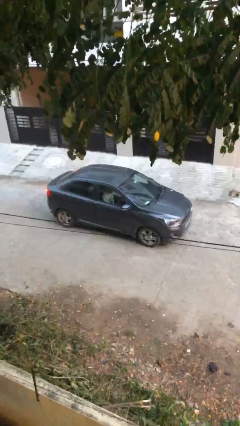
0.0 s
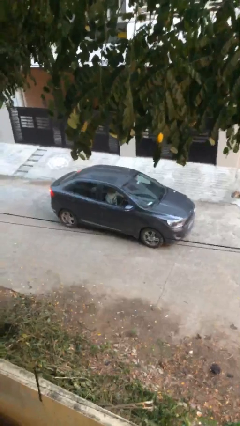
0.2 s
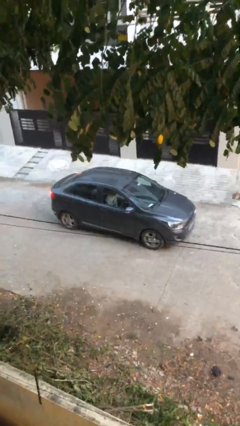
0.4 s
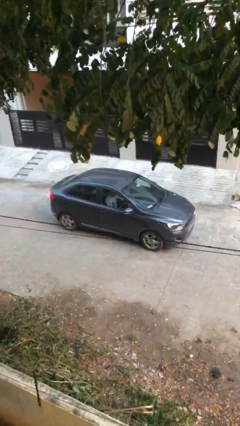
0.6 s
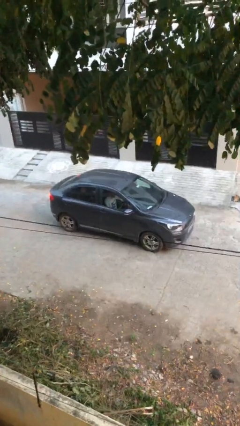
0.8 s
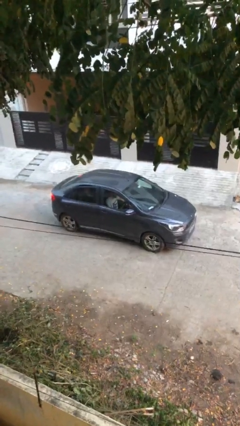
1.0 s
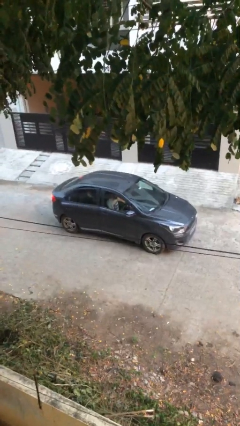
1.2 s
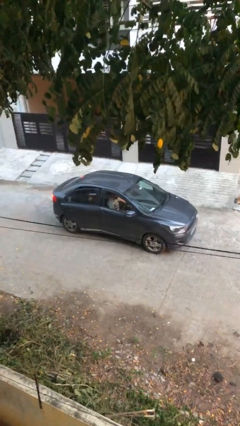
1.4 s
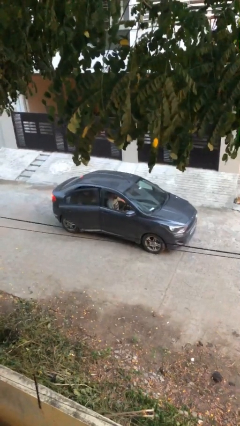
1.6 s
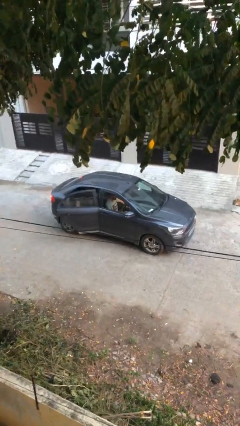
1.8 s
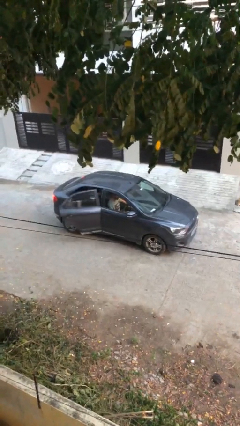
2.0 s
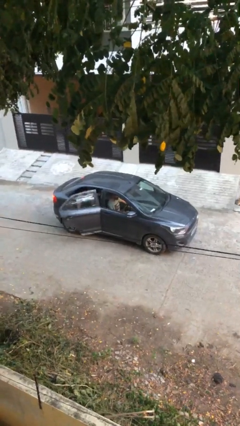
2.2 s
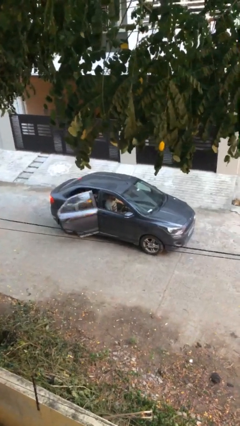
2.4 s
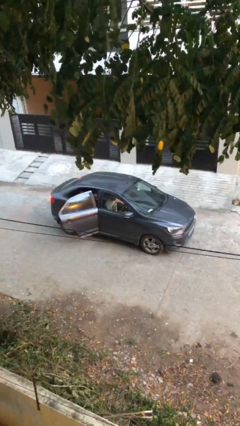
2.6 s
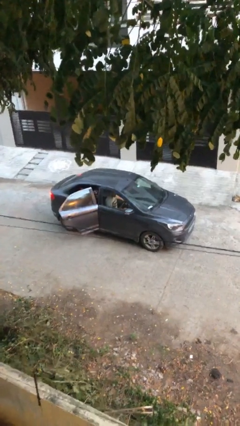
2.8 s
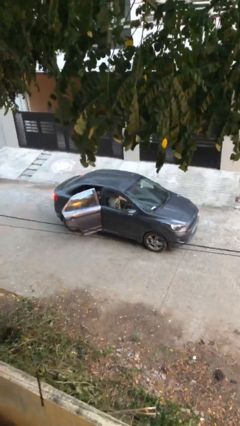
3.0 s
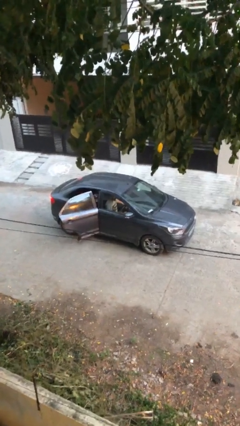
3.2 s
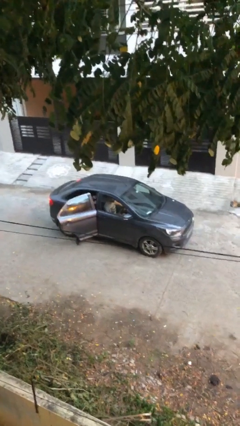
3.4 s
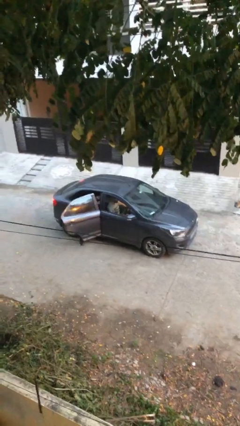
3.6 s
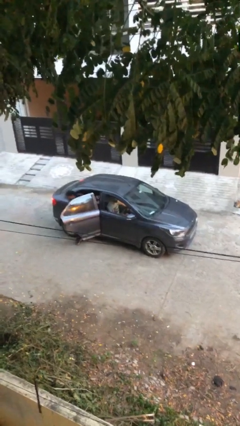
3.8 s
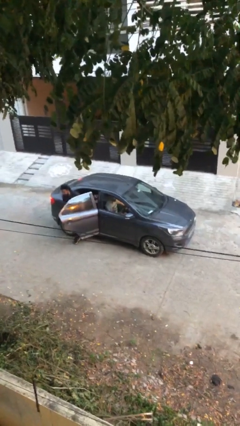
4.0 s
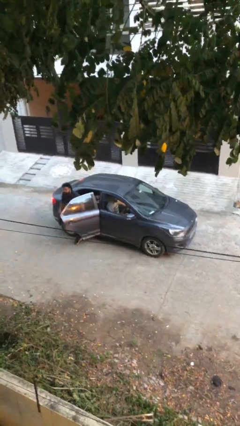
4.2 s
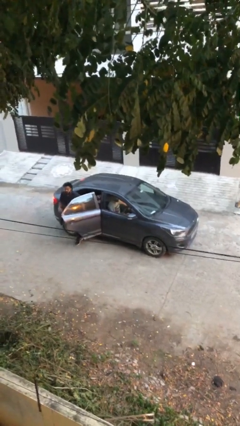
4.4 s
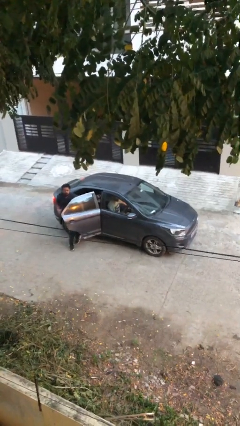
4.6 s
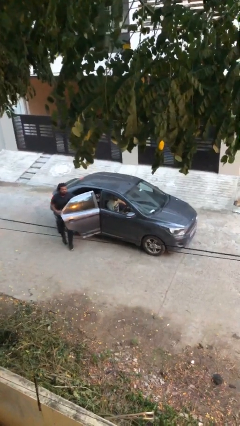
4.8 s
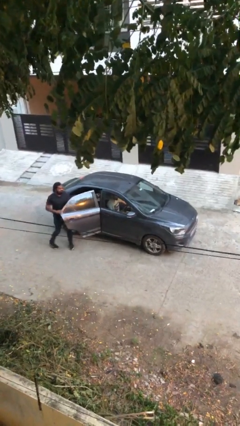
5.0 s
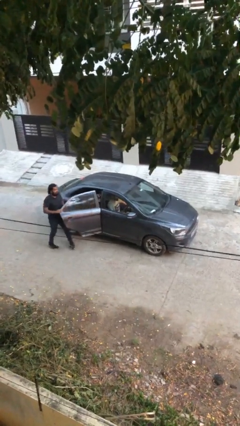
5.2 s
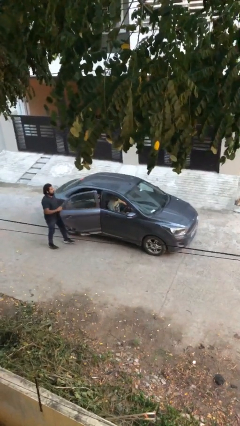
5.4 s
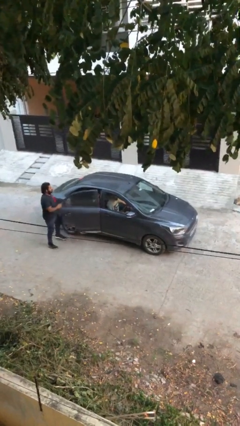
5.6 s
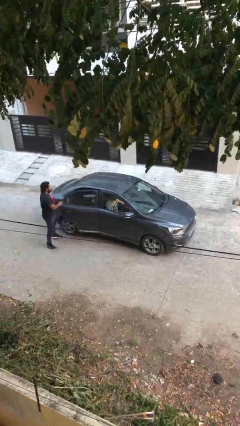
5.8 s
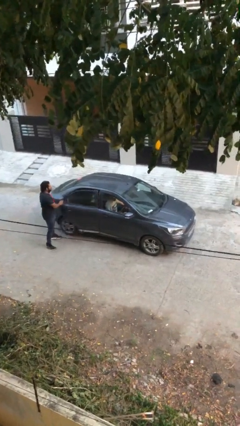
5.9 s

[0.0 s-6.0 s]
car drops off person

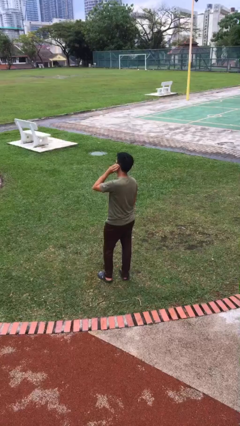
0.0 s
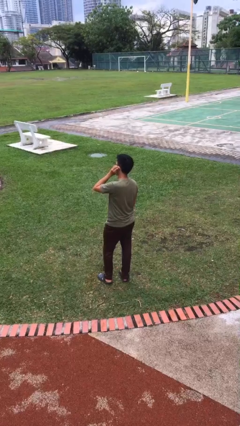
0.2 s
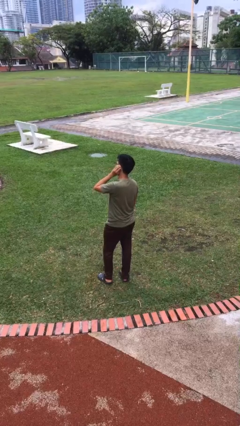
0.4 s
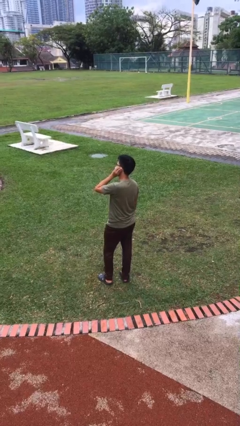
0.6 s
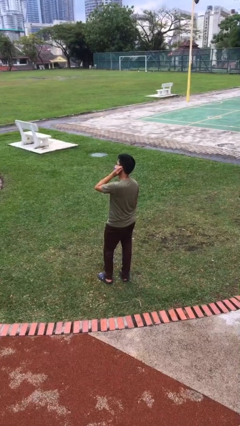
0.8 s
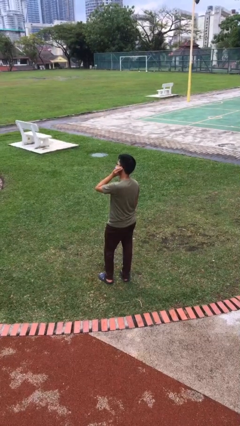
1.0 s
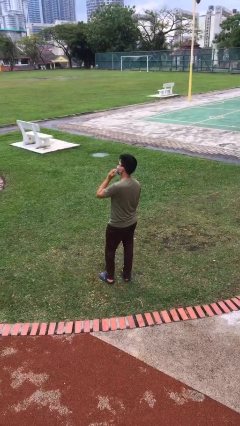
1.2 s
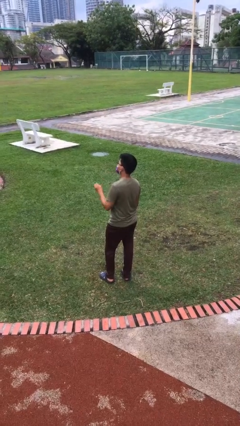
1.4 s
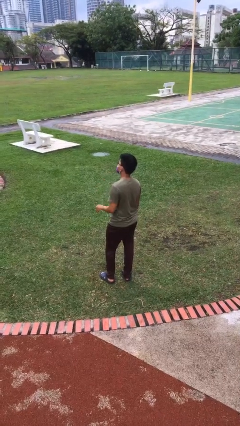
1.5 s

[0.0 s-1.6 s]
person touches earlobe

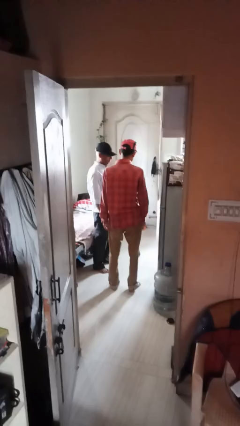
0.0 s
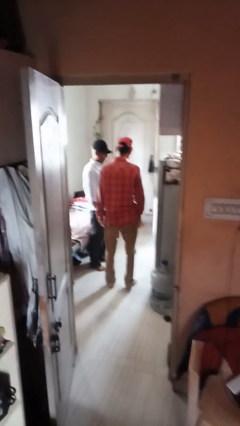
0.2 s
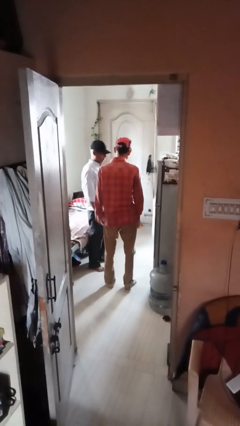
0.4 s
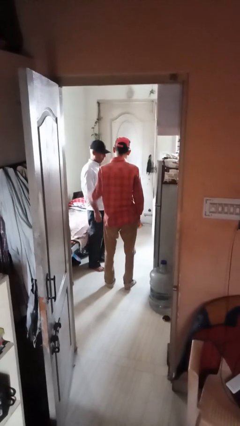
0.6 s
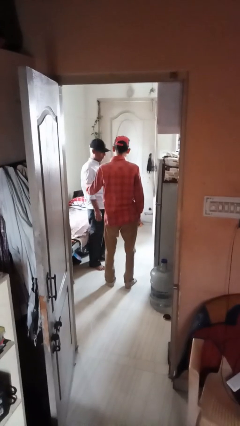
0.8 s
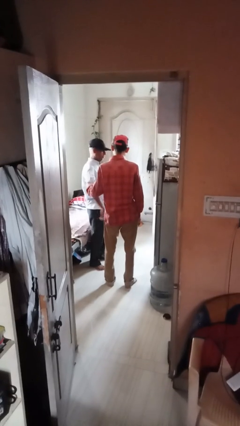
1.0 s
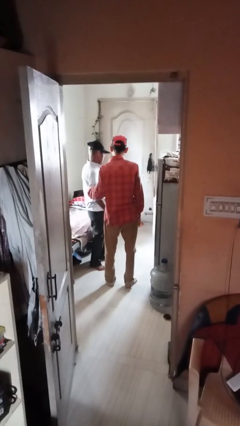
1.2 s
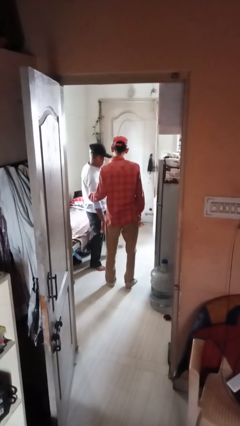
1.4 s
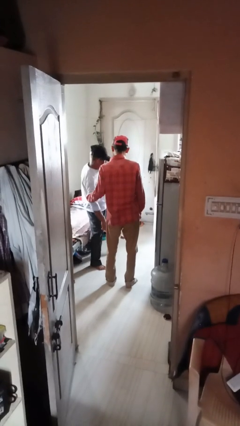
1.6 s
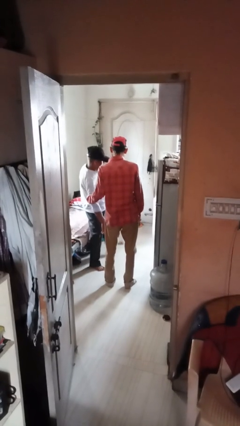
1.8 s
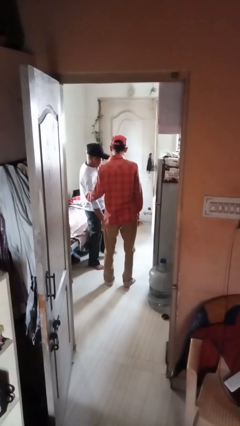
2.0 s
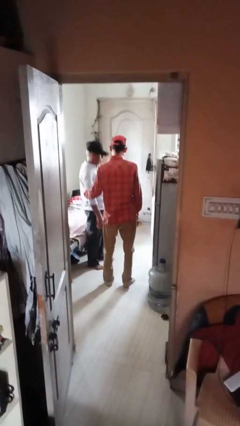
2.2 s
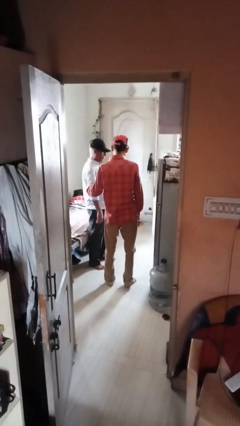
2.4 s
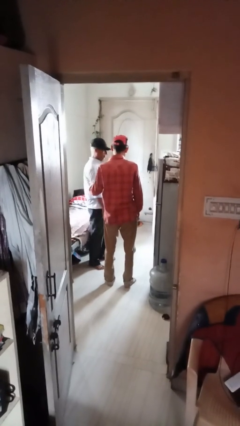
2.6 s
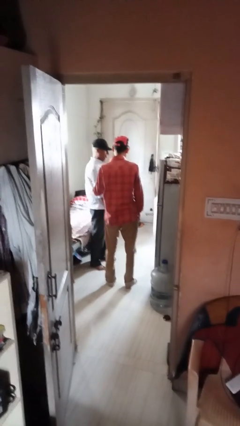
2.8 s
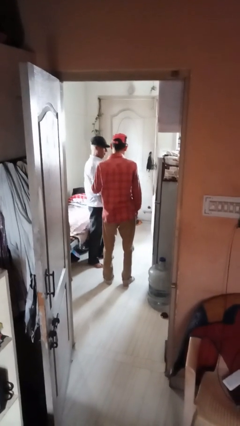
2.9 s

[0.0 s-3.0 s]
person grabs person by bicep

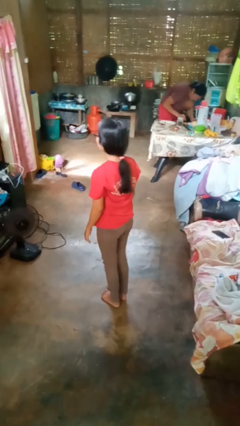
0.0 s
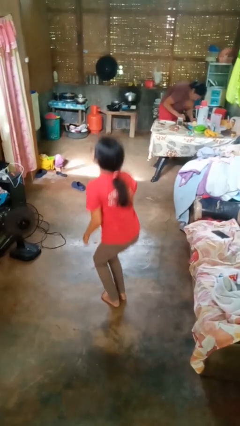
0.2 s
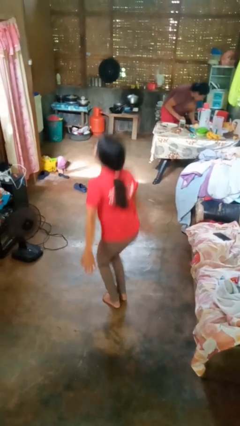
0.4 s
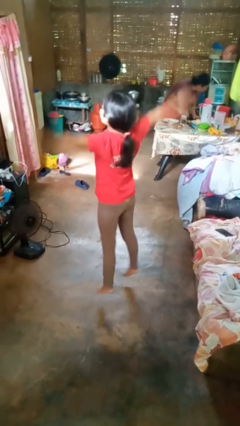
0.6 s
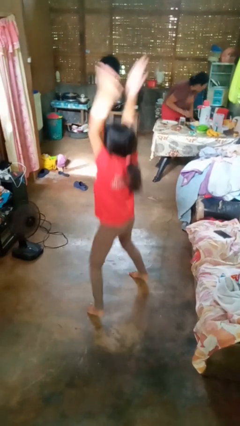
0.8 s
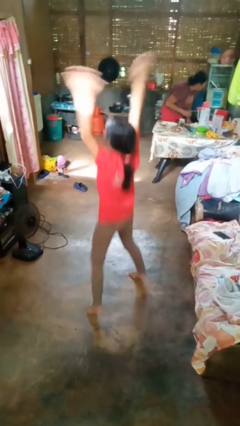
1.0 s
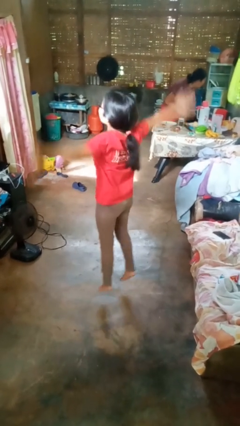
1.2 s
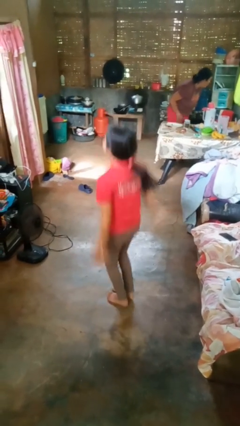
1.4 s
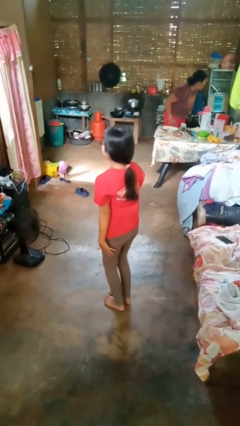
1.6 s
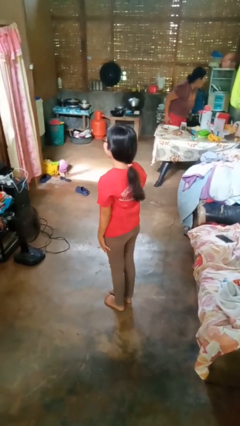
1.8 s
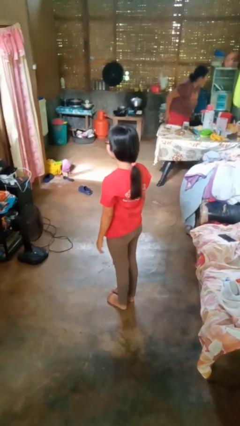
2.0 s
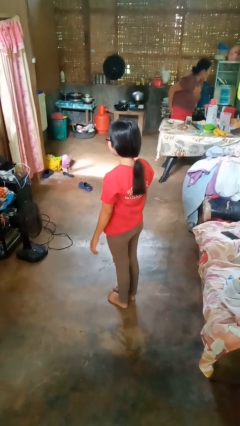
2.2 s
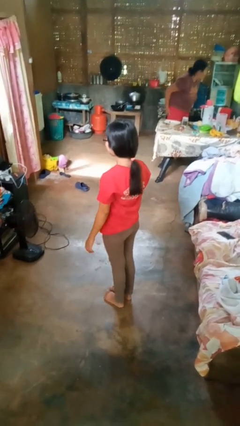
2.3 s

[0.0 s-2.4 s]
person exercises with jumping jacks

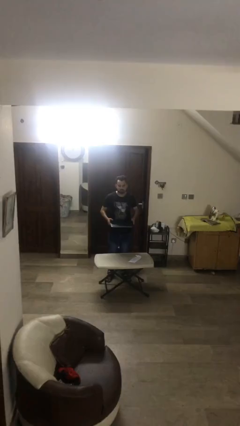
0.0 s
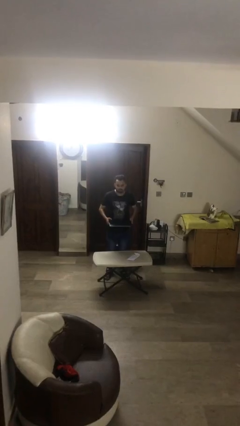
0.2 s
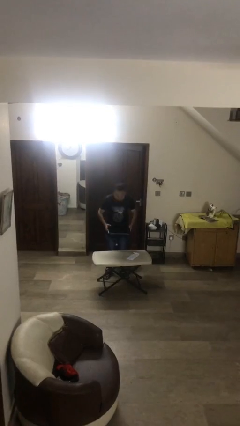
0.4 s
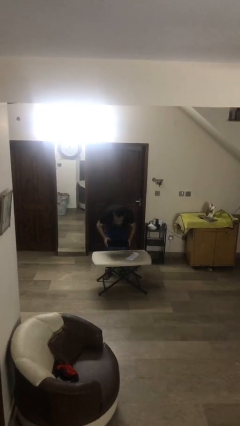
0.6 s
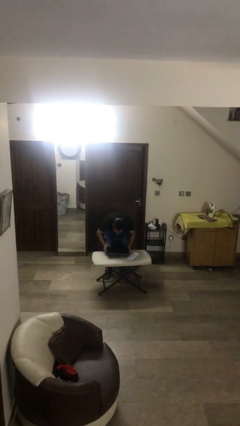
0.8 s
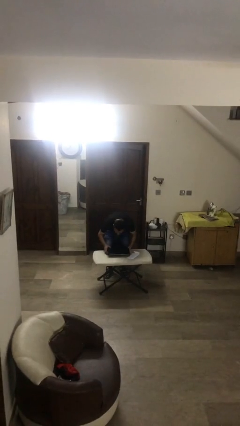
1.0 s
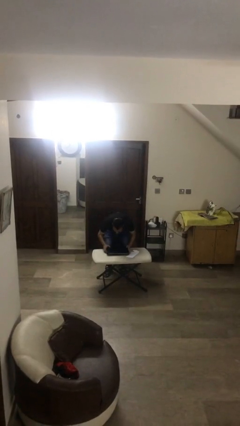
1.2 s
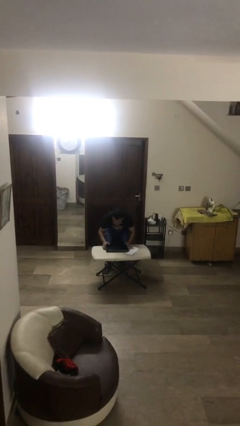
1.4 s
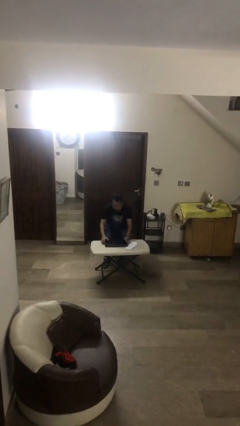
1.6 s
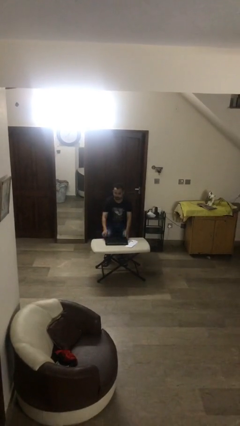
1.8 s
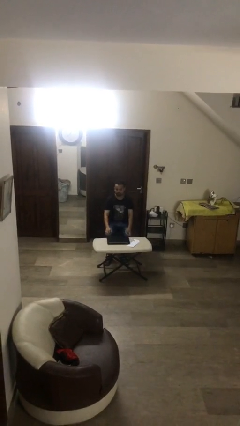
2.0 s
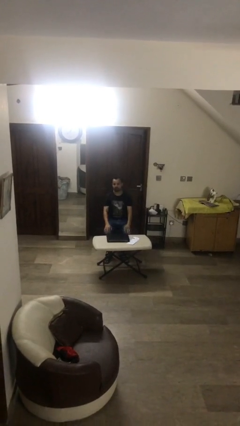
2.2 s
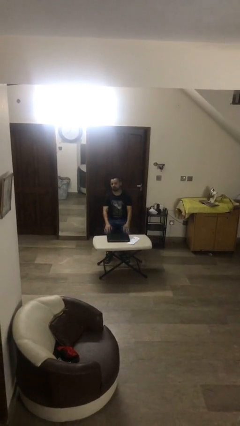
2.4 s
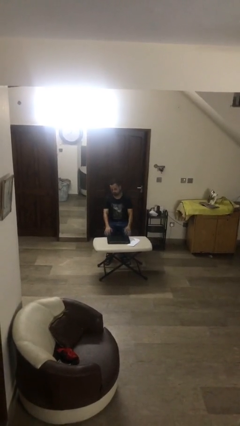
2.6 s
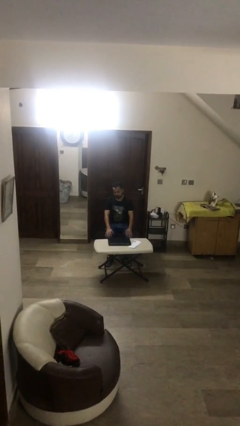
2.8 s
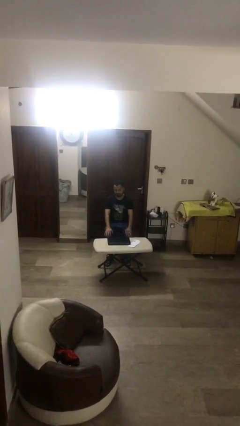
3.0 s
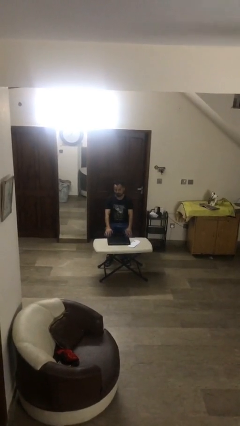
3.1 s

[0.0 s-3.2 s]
person sits down

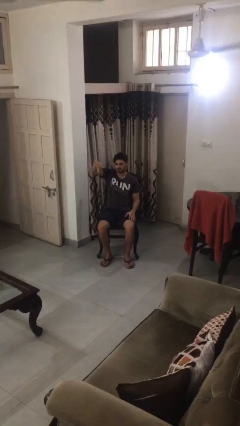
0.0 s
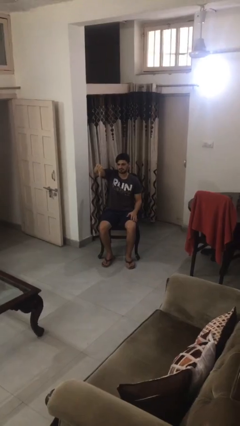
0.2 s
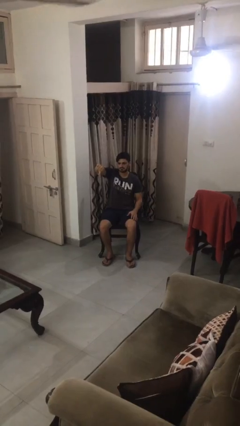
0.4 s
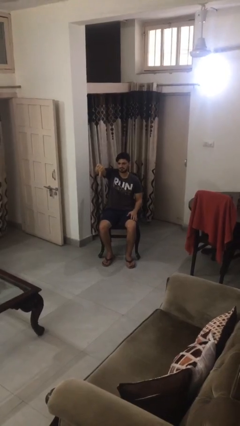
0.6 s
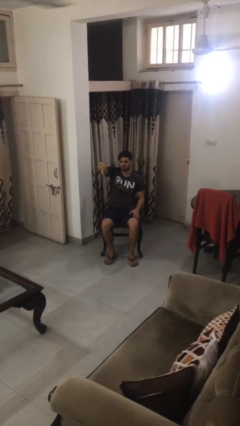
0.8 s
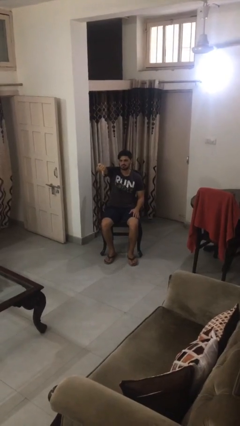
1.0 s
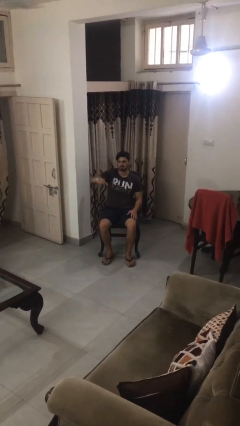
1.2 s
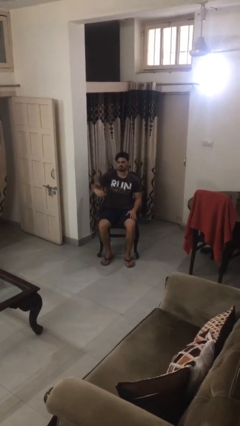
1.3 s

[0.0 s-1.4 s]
person gestures thumbs down

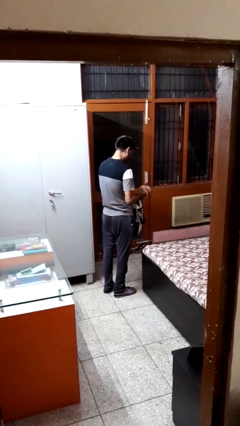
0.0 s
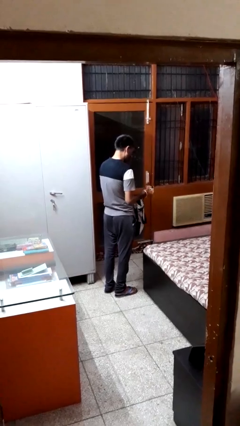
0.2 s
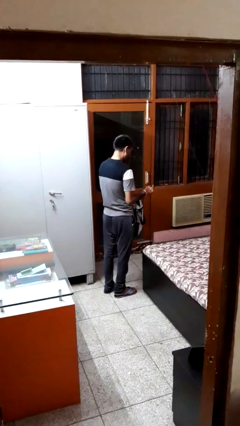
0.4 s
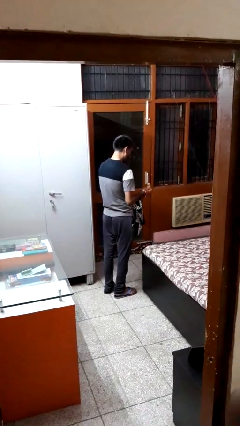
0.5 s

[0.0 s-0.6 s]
person takes object from bag
